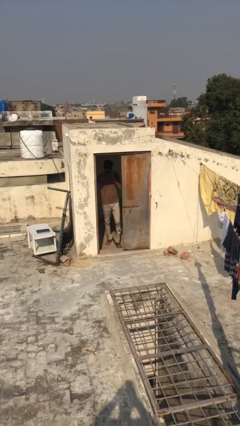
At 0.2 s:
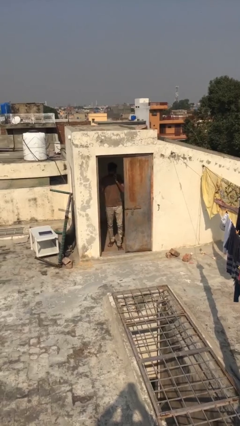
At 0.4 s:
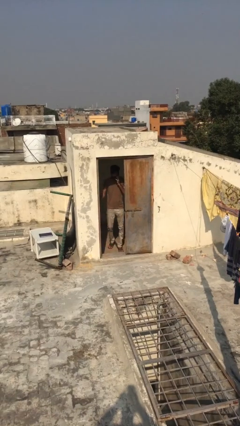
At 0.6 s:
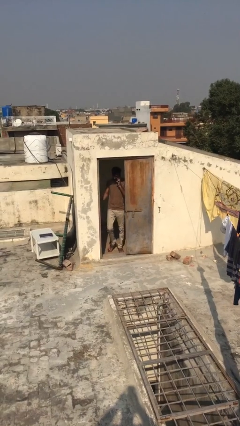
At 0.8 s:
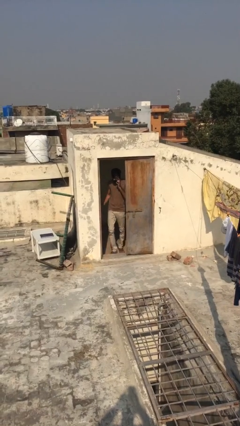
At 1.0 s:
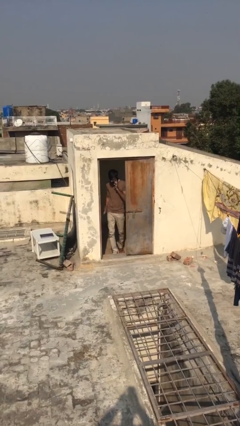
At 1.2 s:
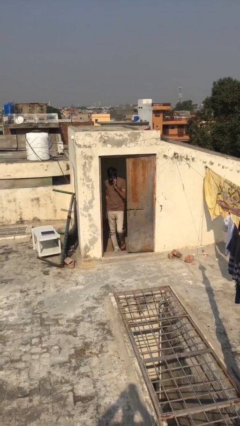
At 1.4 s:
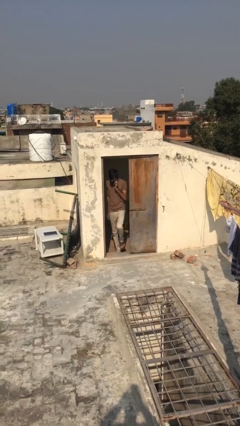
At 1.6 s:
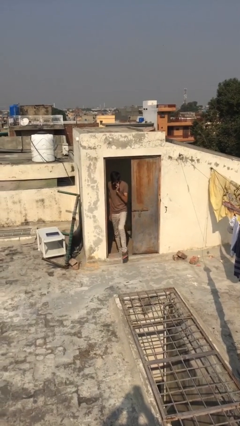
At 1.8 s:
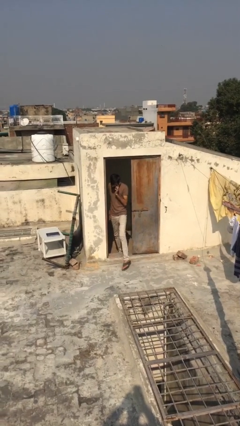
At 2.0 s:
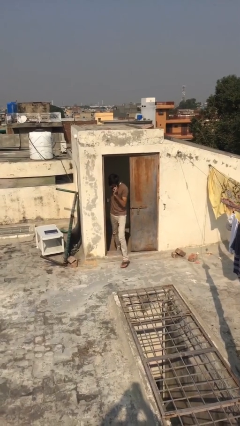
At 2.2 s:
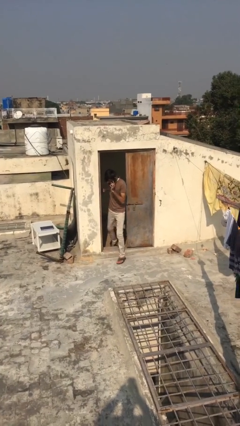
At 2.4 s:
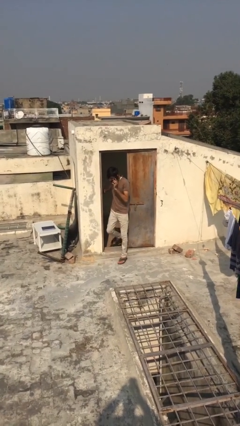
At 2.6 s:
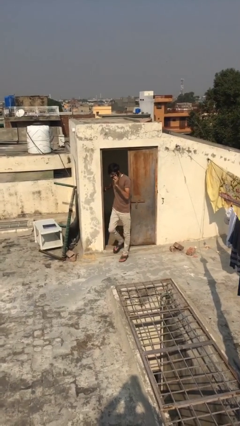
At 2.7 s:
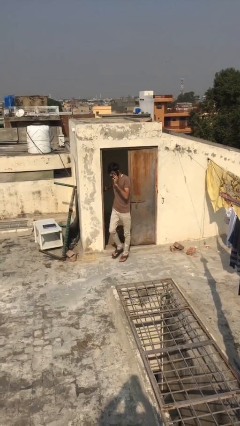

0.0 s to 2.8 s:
person enters scene through structure

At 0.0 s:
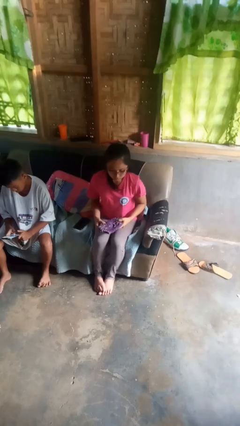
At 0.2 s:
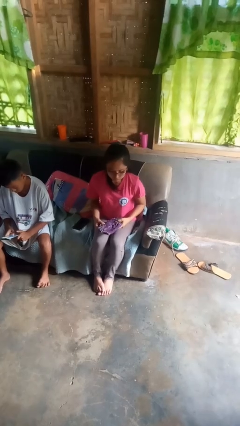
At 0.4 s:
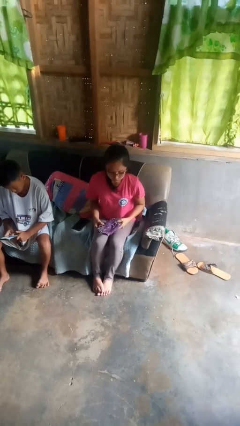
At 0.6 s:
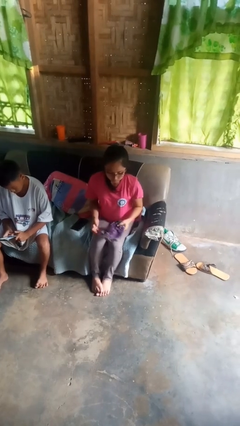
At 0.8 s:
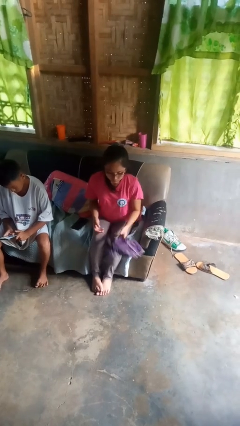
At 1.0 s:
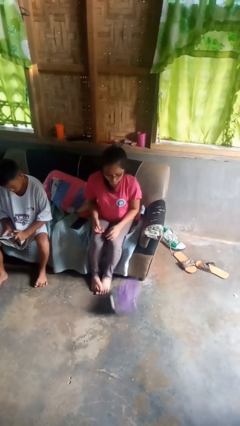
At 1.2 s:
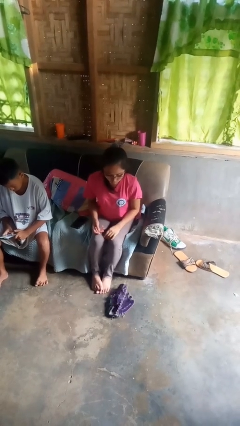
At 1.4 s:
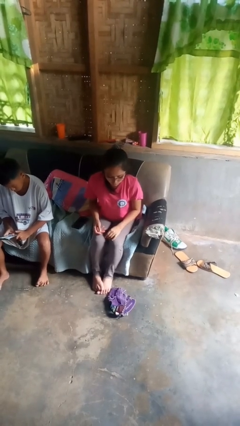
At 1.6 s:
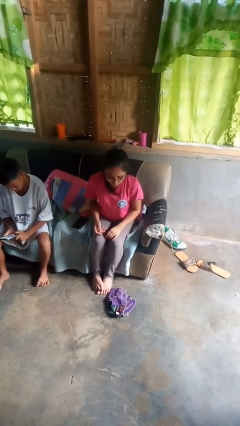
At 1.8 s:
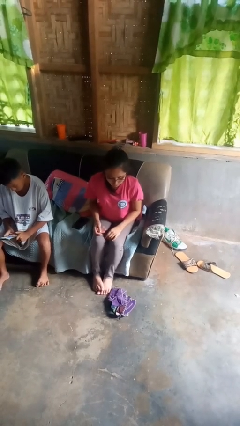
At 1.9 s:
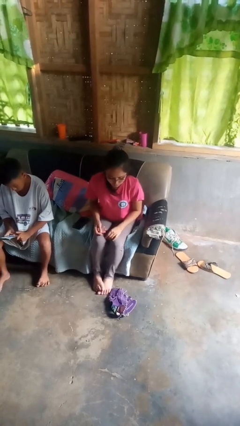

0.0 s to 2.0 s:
person drops object

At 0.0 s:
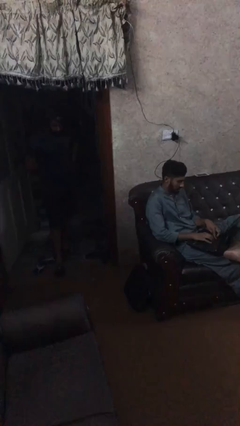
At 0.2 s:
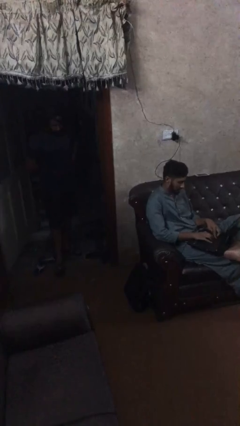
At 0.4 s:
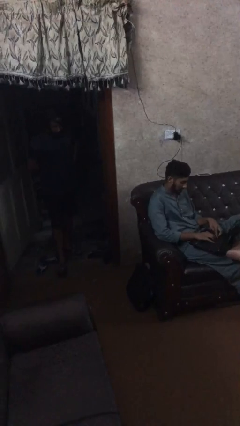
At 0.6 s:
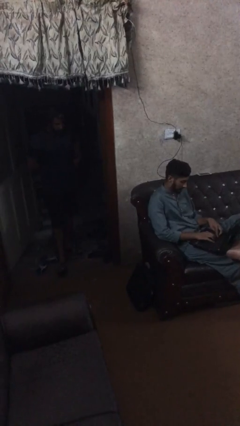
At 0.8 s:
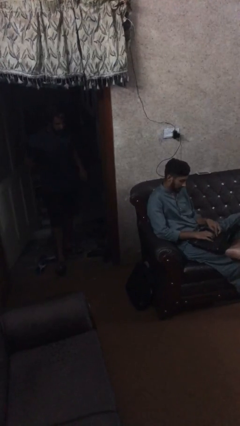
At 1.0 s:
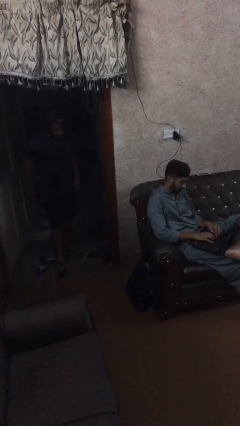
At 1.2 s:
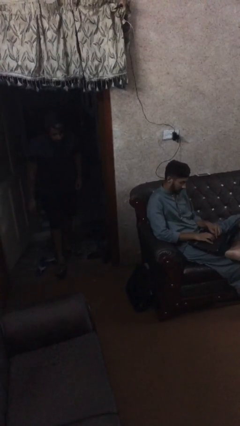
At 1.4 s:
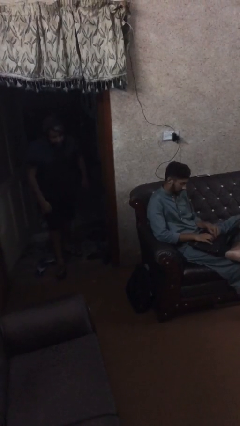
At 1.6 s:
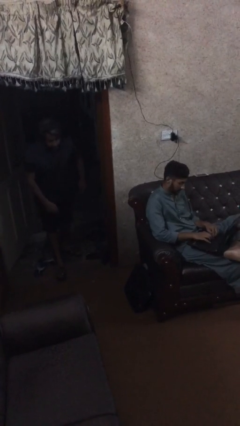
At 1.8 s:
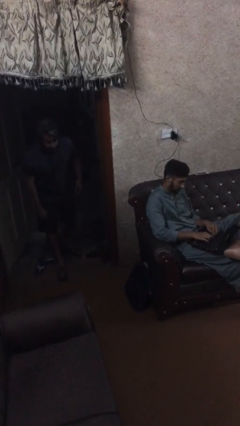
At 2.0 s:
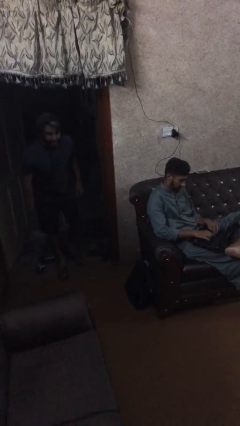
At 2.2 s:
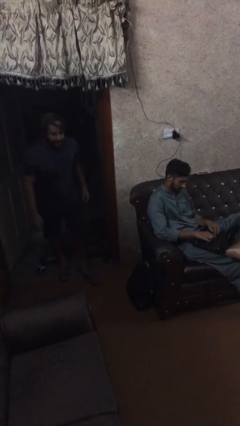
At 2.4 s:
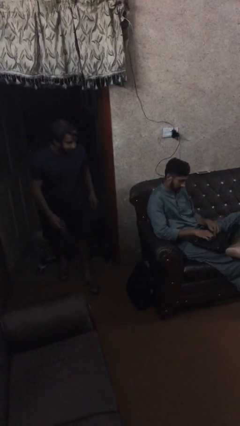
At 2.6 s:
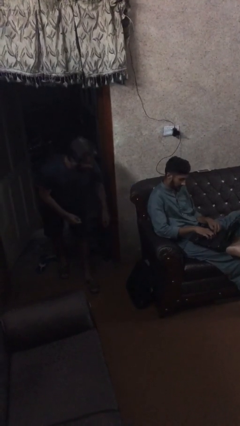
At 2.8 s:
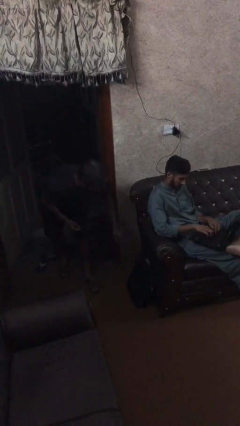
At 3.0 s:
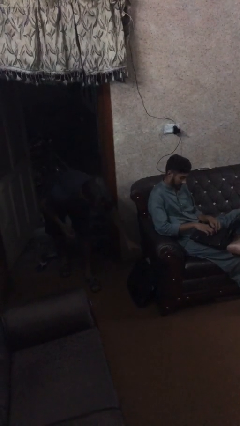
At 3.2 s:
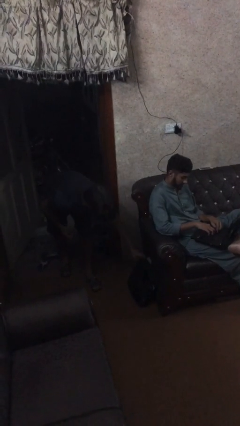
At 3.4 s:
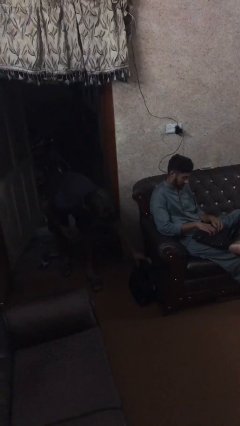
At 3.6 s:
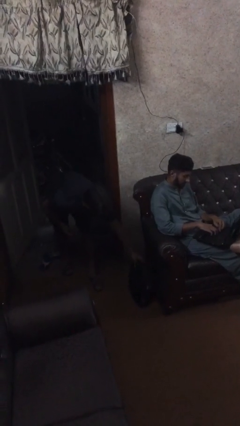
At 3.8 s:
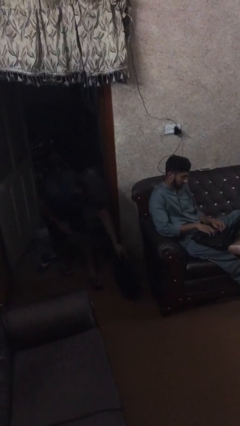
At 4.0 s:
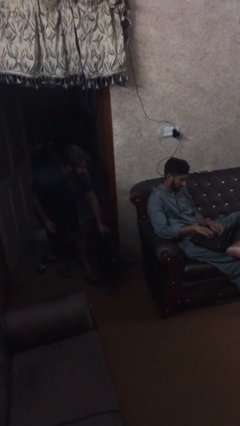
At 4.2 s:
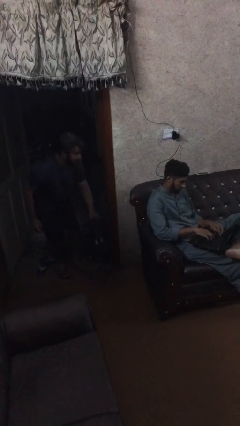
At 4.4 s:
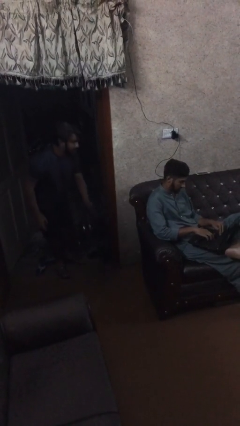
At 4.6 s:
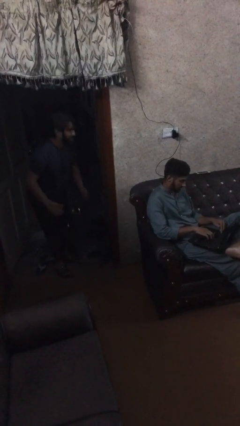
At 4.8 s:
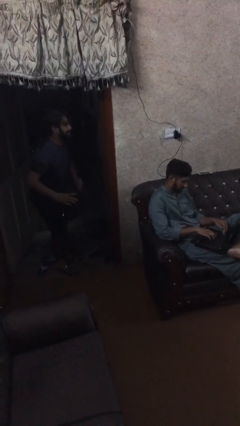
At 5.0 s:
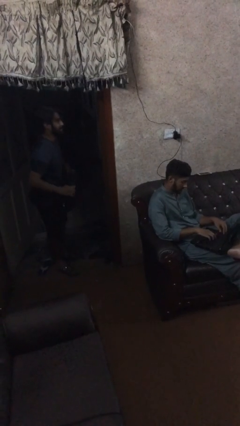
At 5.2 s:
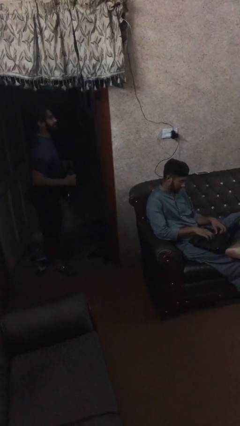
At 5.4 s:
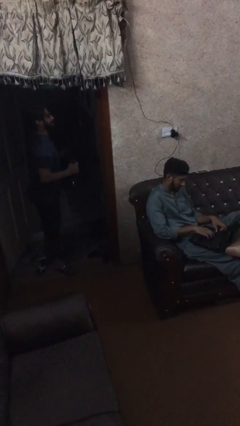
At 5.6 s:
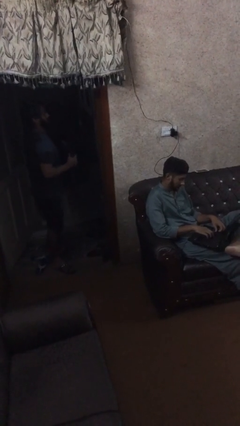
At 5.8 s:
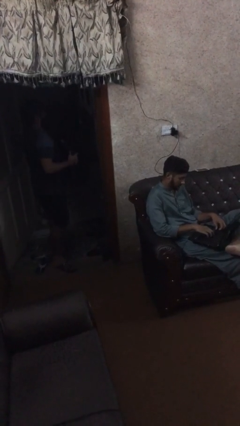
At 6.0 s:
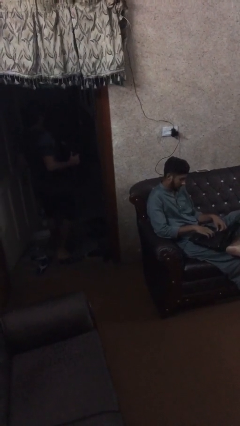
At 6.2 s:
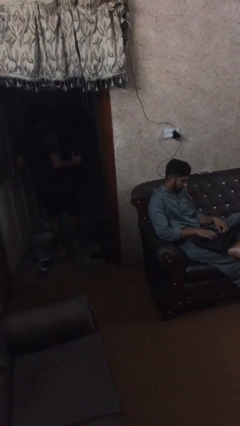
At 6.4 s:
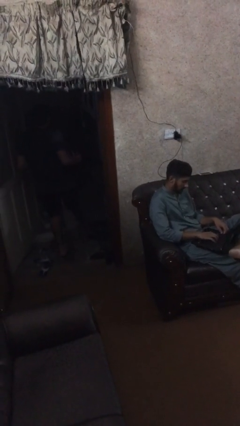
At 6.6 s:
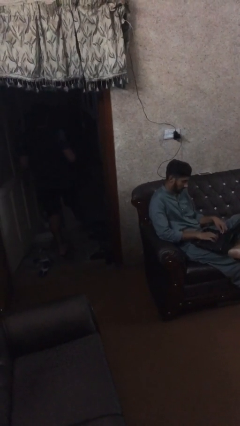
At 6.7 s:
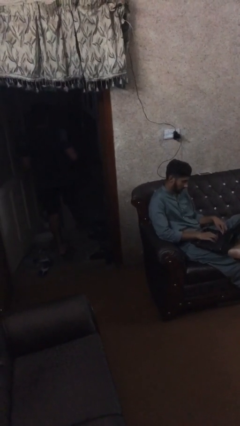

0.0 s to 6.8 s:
person steals object from person

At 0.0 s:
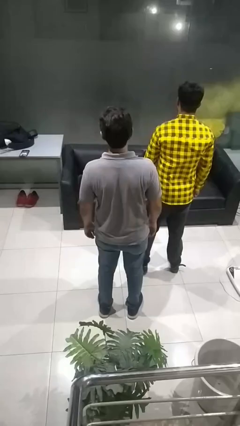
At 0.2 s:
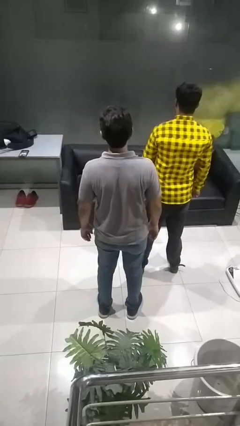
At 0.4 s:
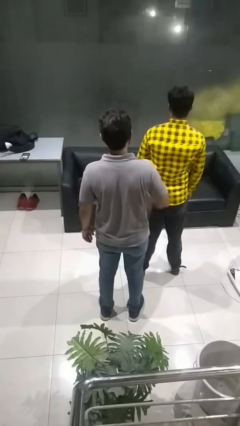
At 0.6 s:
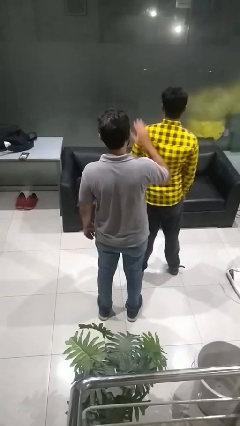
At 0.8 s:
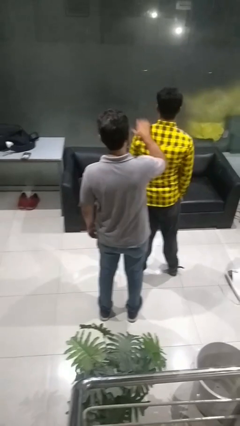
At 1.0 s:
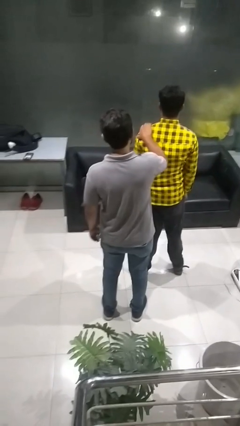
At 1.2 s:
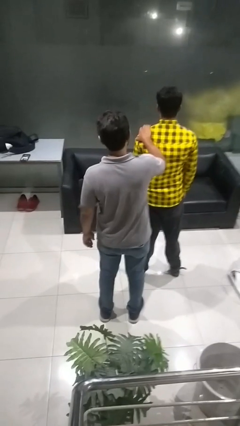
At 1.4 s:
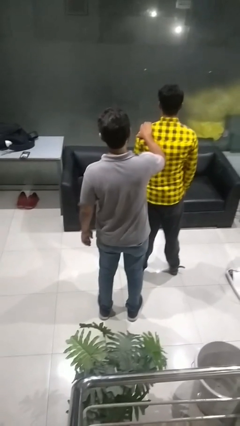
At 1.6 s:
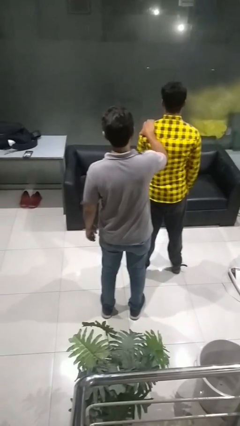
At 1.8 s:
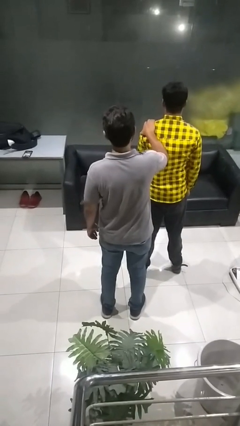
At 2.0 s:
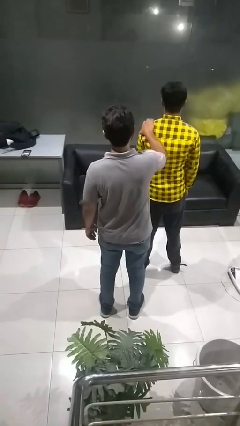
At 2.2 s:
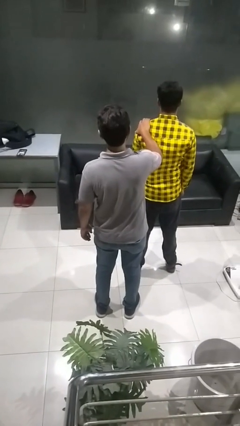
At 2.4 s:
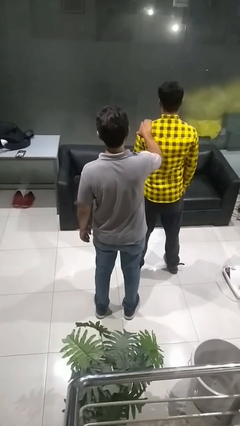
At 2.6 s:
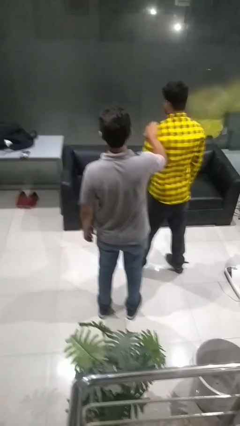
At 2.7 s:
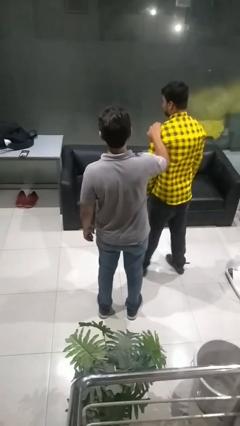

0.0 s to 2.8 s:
person grabs person by shoulder

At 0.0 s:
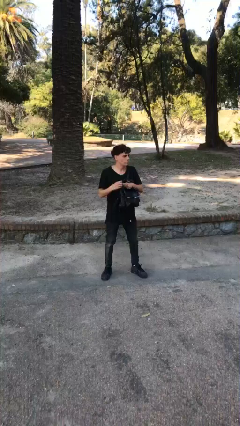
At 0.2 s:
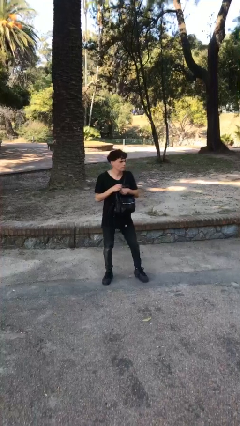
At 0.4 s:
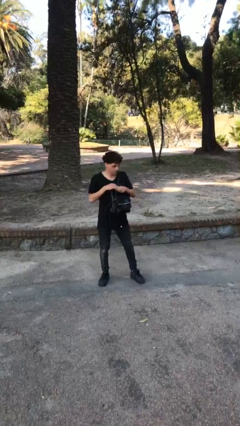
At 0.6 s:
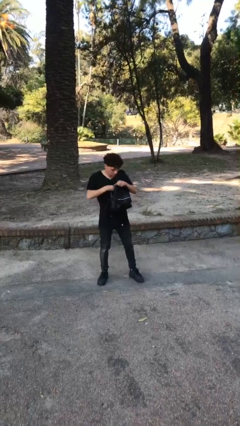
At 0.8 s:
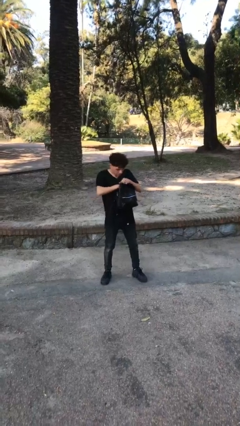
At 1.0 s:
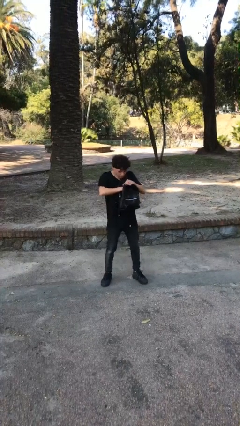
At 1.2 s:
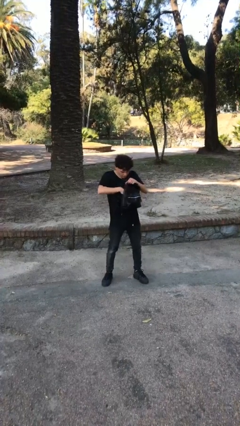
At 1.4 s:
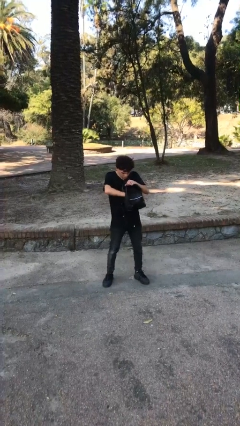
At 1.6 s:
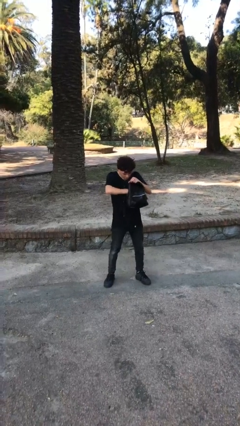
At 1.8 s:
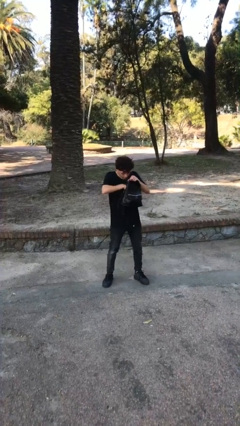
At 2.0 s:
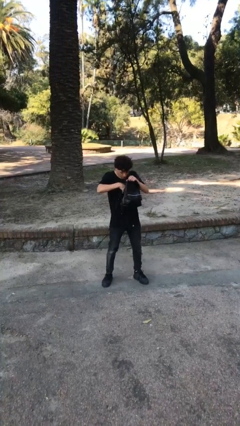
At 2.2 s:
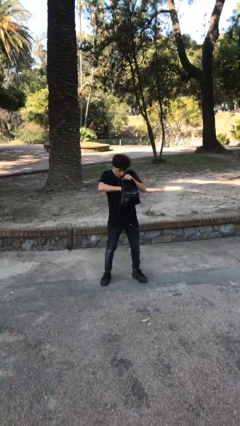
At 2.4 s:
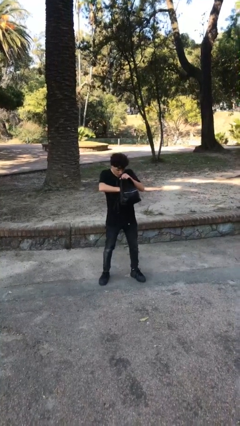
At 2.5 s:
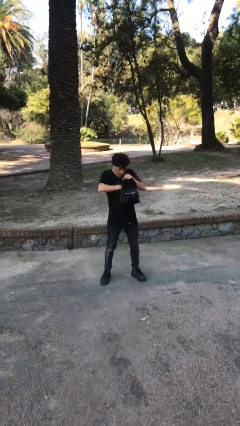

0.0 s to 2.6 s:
person searches in purse

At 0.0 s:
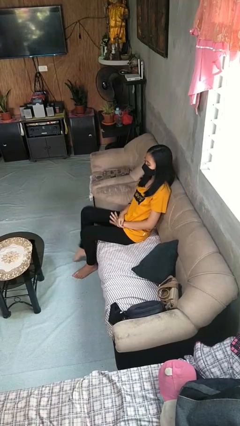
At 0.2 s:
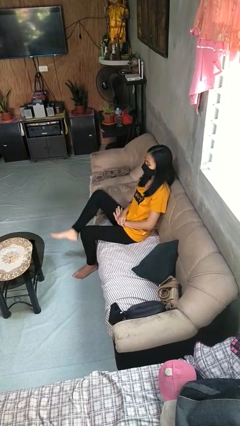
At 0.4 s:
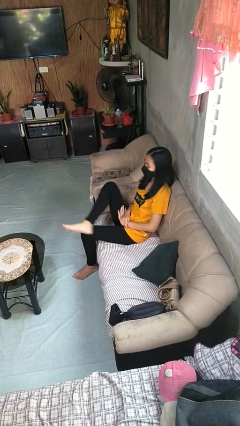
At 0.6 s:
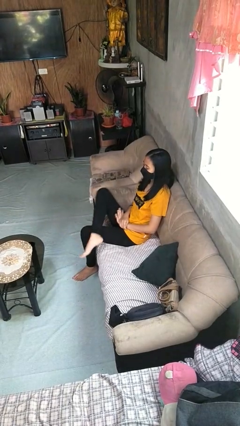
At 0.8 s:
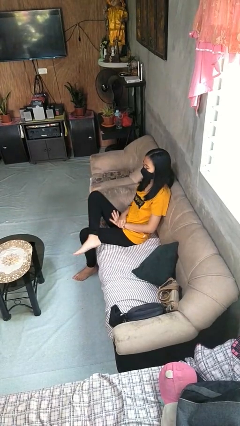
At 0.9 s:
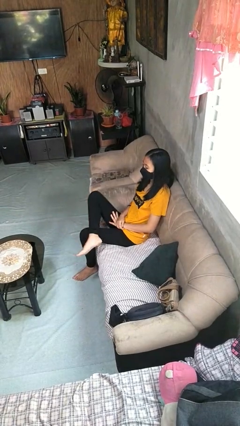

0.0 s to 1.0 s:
person crosses legs
